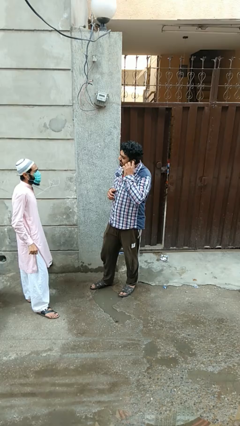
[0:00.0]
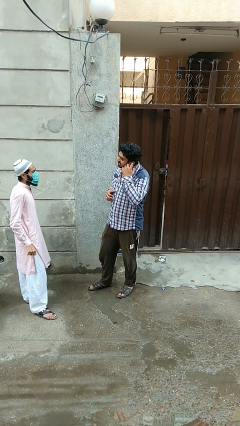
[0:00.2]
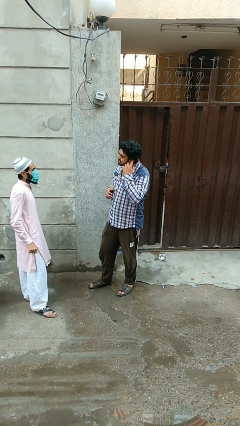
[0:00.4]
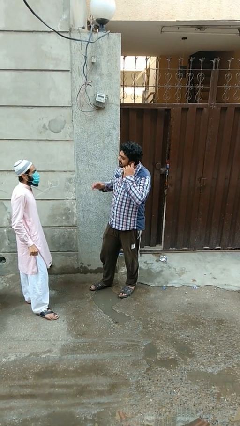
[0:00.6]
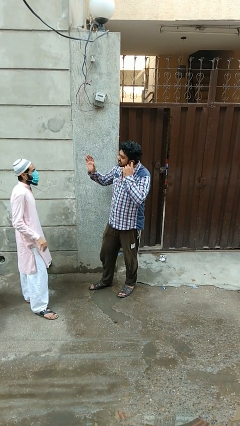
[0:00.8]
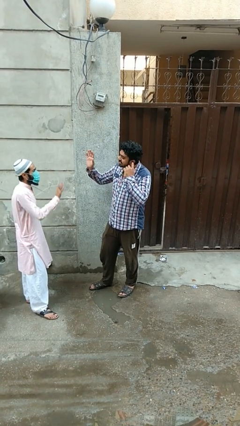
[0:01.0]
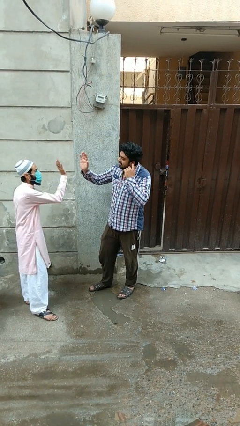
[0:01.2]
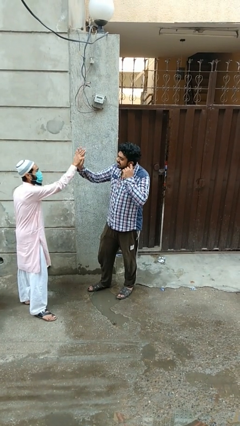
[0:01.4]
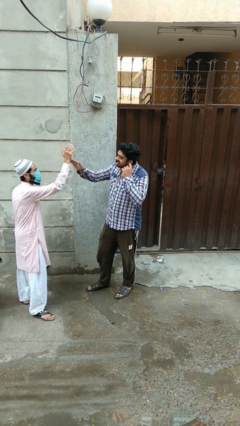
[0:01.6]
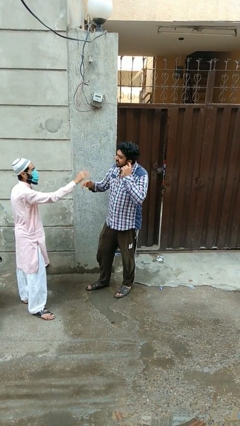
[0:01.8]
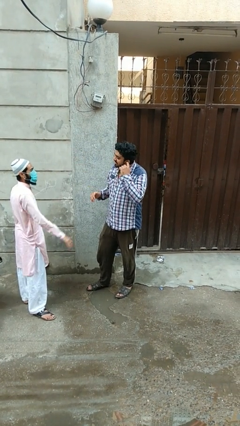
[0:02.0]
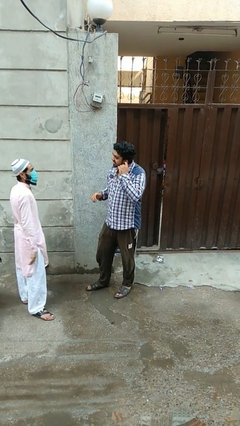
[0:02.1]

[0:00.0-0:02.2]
person highfives hand

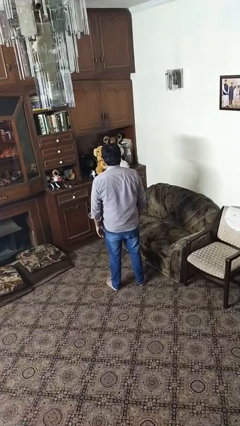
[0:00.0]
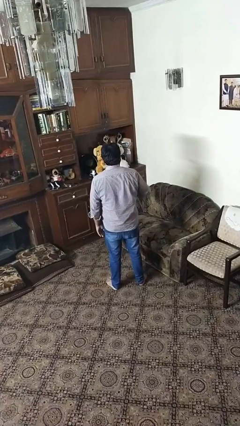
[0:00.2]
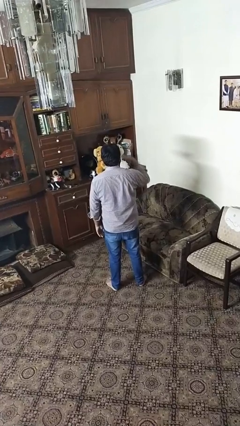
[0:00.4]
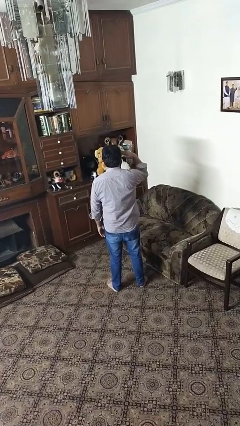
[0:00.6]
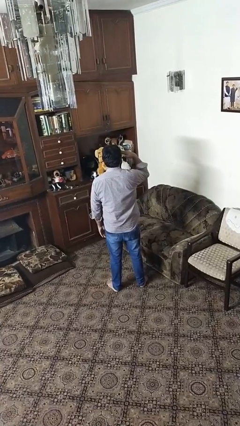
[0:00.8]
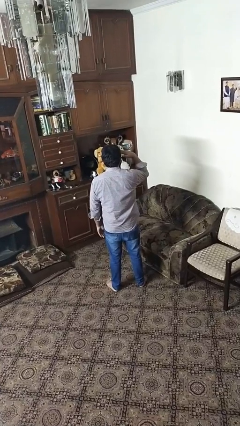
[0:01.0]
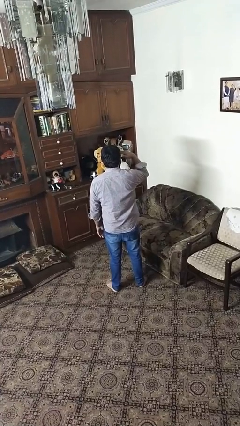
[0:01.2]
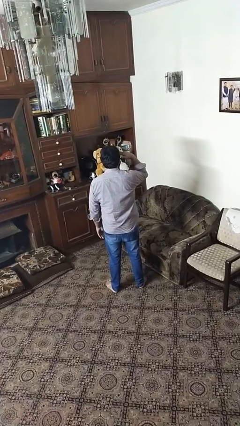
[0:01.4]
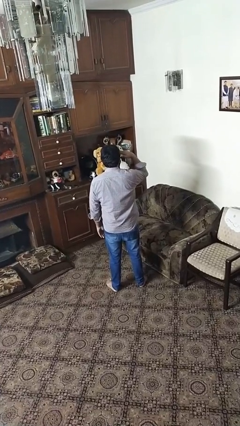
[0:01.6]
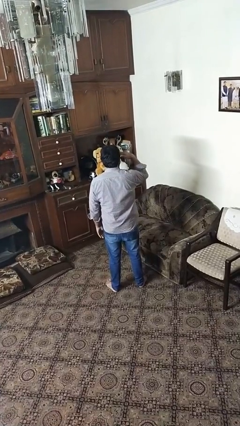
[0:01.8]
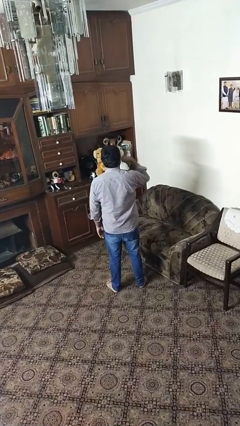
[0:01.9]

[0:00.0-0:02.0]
person salutes

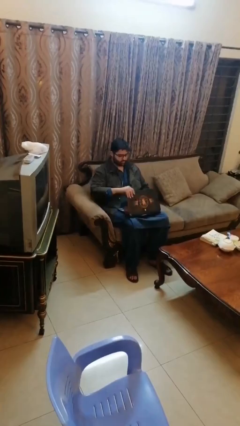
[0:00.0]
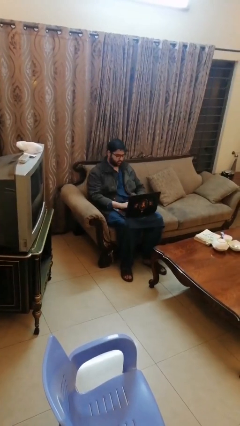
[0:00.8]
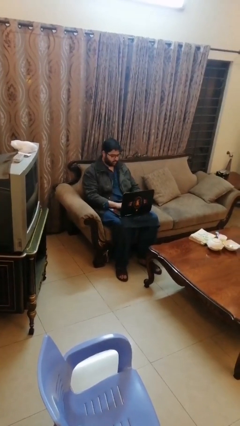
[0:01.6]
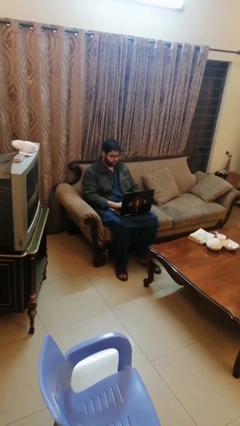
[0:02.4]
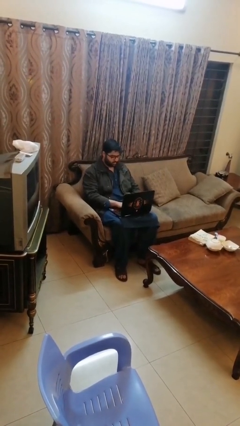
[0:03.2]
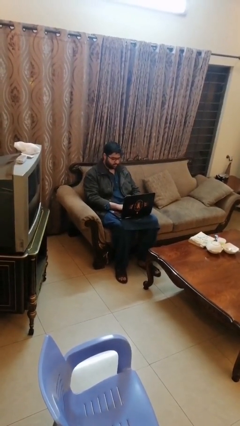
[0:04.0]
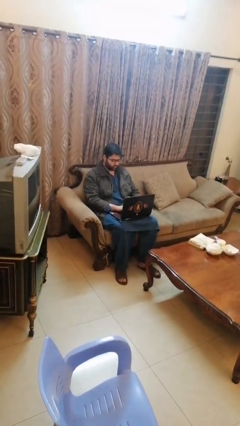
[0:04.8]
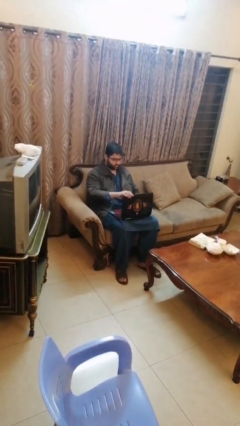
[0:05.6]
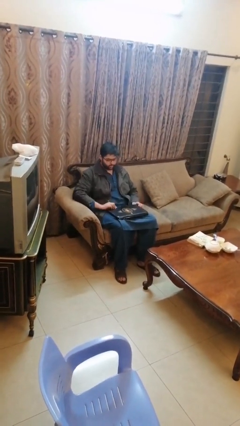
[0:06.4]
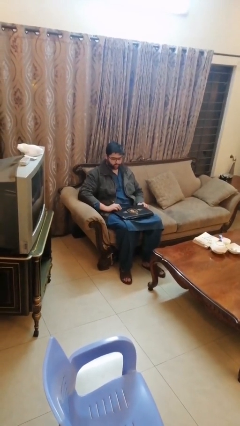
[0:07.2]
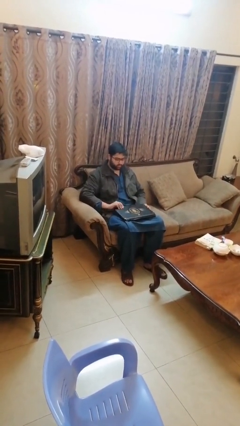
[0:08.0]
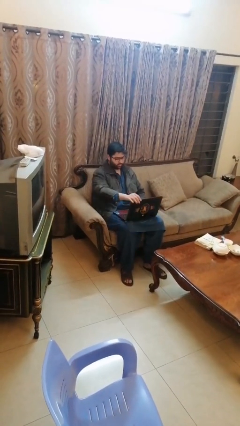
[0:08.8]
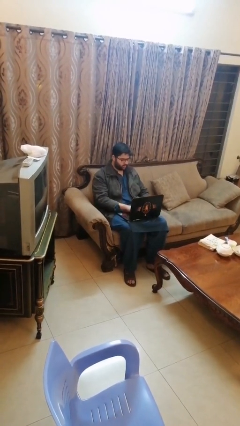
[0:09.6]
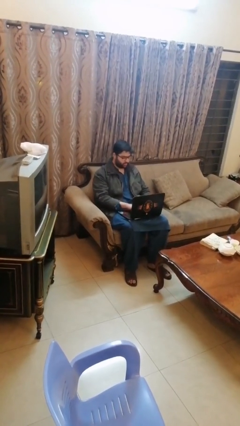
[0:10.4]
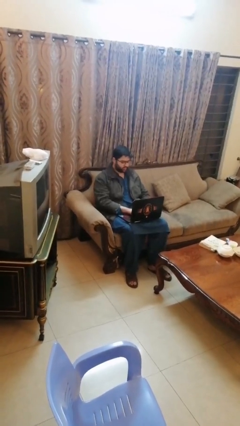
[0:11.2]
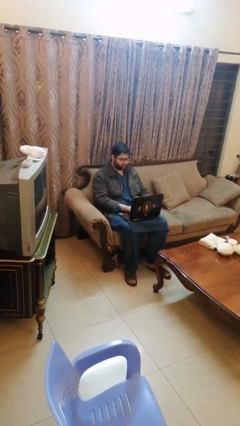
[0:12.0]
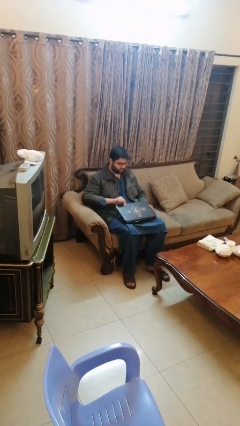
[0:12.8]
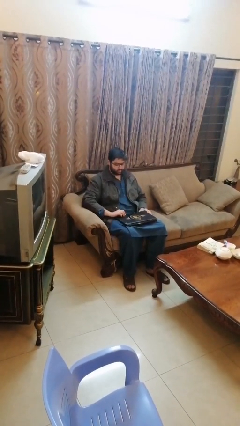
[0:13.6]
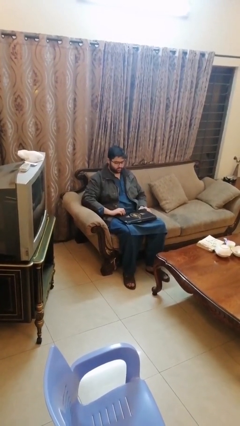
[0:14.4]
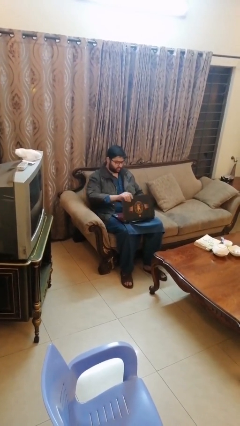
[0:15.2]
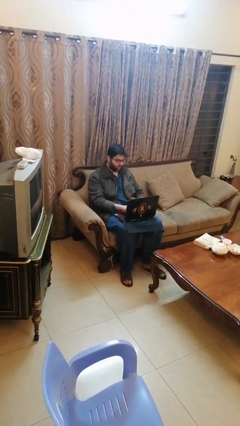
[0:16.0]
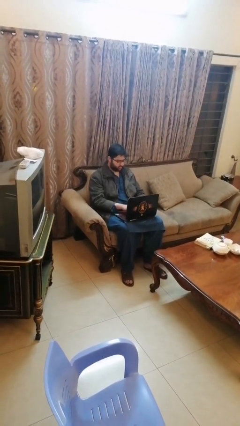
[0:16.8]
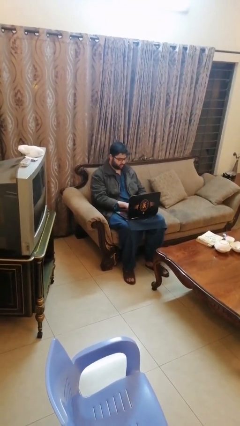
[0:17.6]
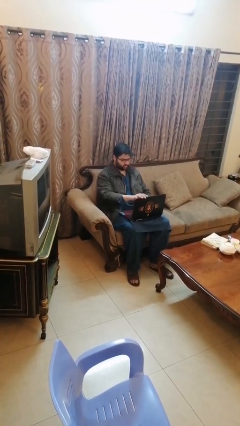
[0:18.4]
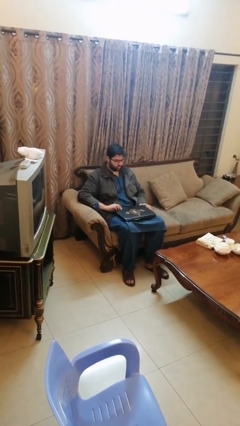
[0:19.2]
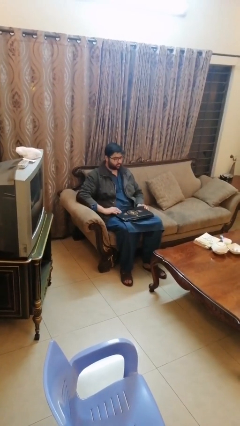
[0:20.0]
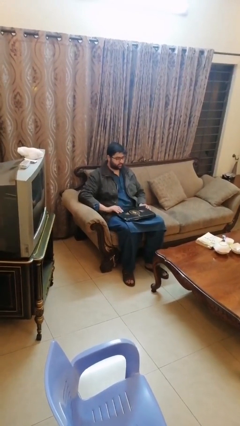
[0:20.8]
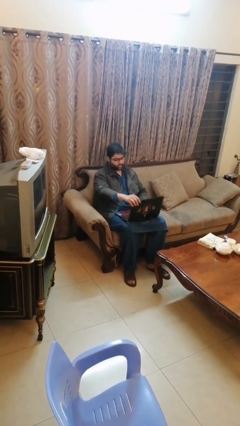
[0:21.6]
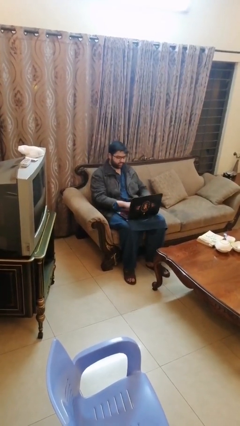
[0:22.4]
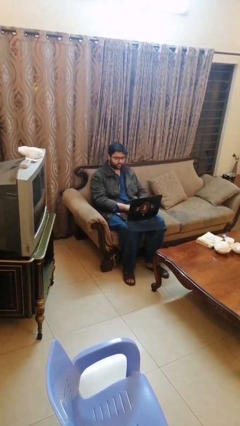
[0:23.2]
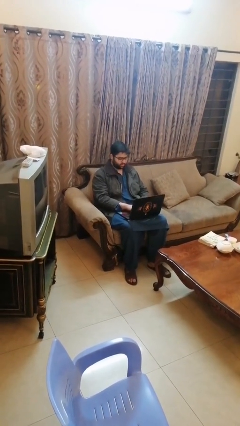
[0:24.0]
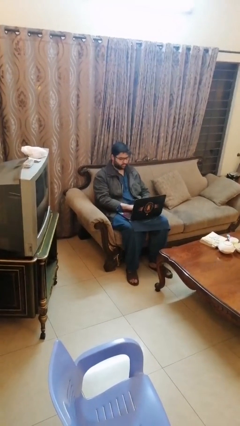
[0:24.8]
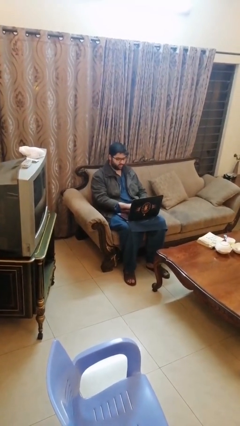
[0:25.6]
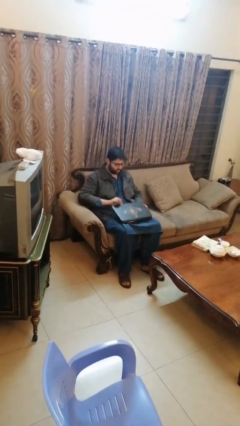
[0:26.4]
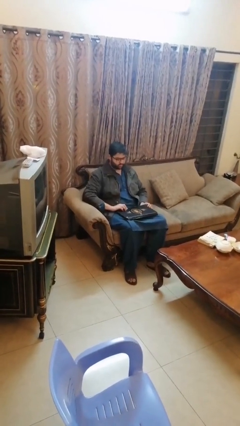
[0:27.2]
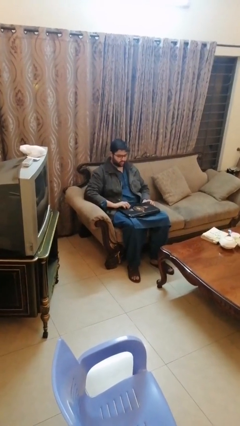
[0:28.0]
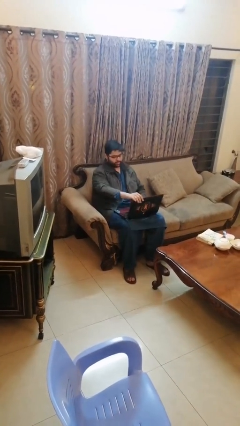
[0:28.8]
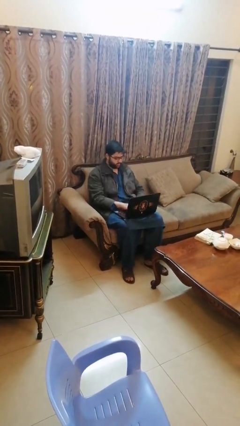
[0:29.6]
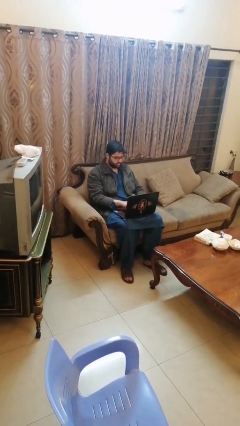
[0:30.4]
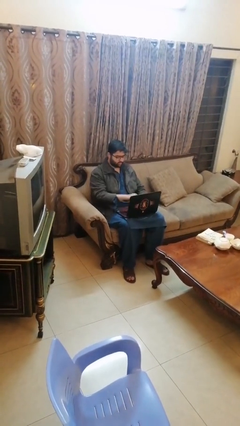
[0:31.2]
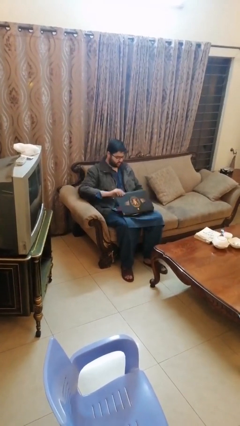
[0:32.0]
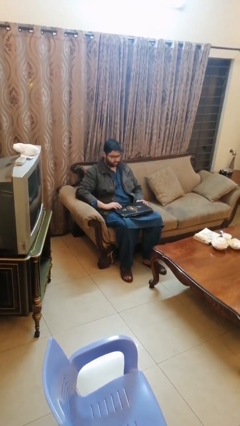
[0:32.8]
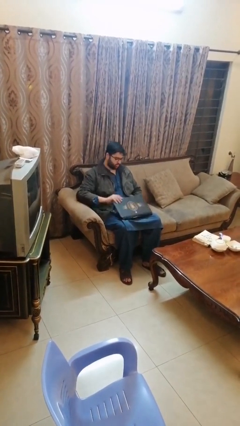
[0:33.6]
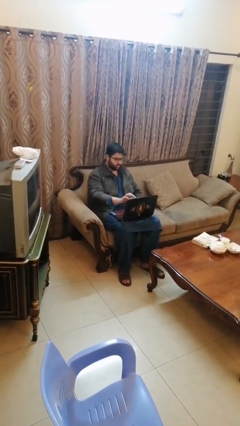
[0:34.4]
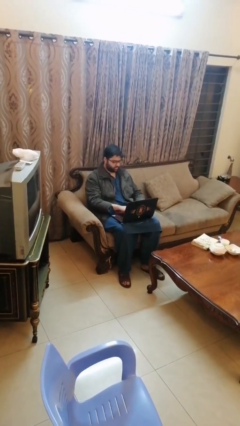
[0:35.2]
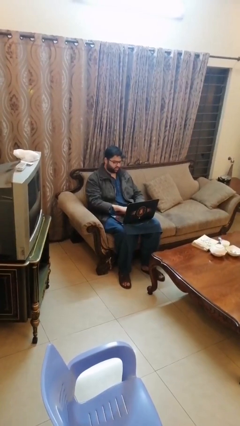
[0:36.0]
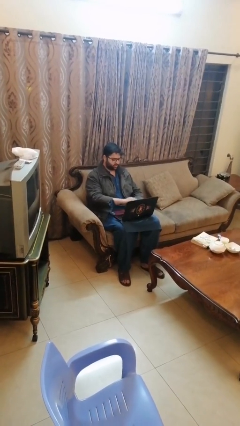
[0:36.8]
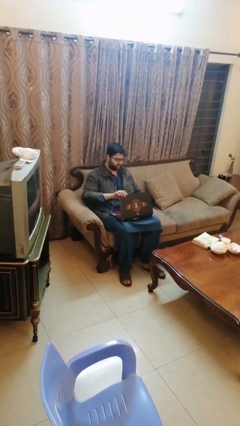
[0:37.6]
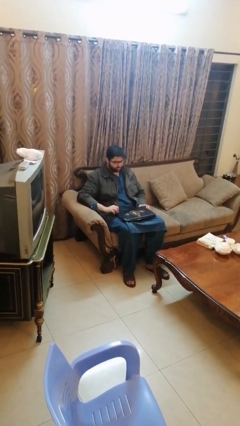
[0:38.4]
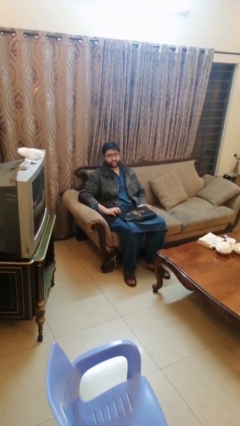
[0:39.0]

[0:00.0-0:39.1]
person interacts with laptop

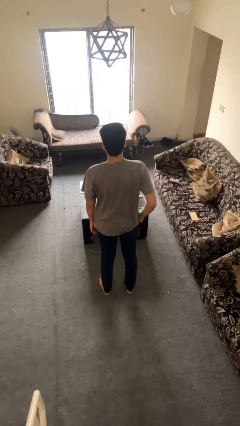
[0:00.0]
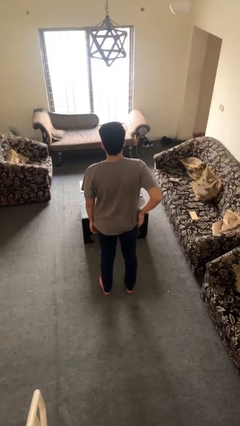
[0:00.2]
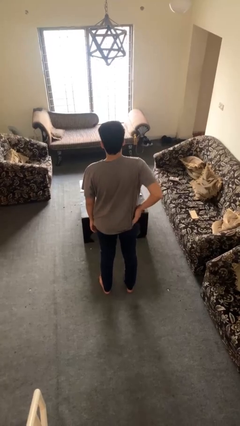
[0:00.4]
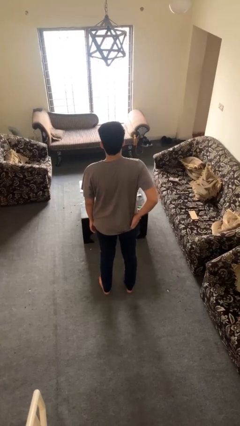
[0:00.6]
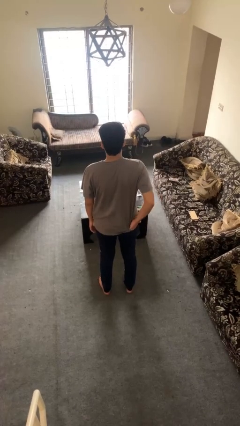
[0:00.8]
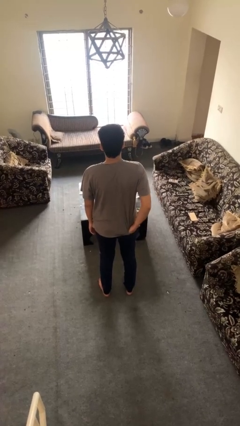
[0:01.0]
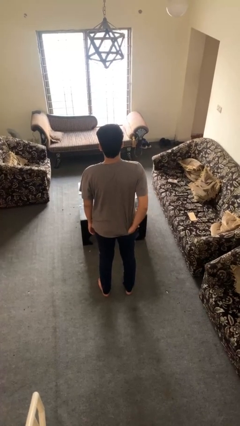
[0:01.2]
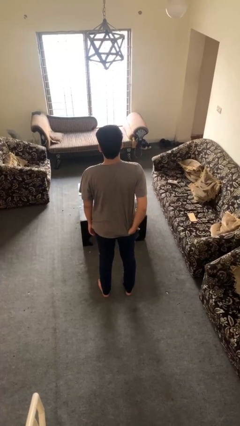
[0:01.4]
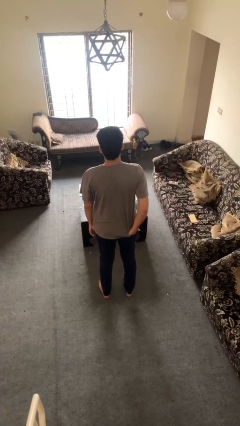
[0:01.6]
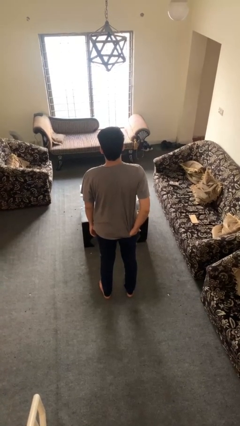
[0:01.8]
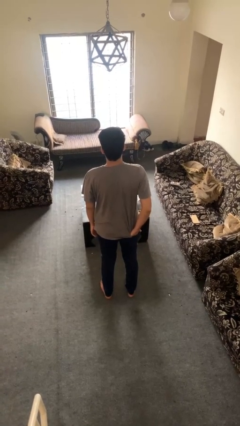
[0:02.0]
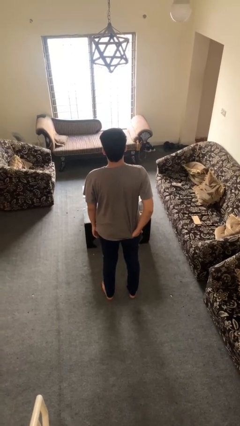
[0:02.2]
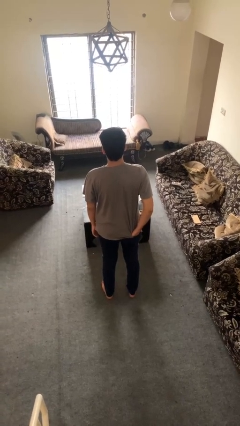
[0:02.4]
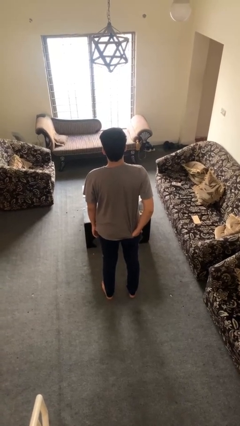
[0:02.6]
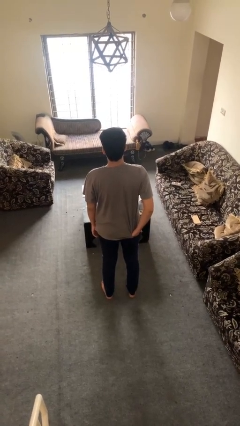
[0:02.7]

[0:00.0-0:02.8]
person puts hands in back pockets

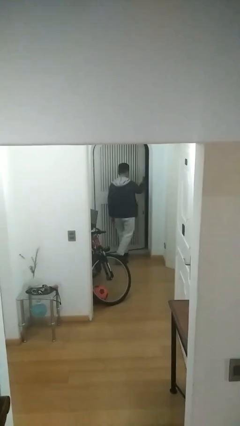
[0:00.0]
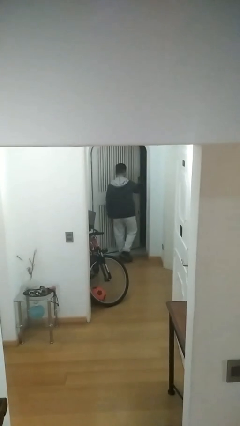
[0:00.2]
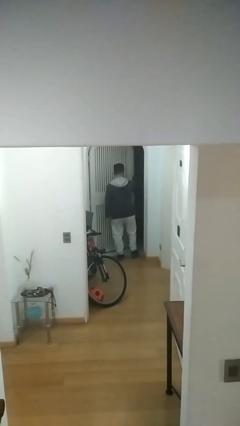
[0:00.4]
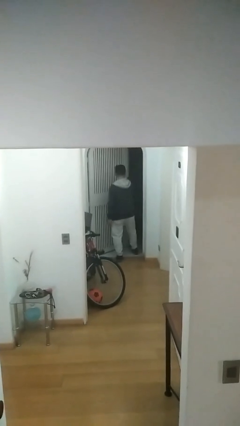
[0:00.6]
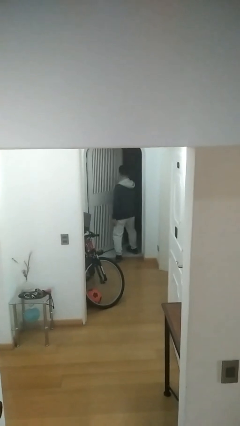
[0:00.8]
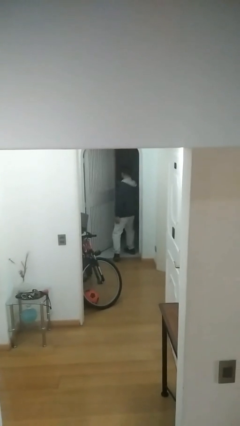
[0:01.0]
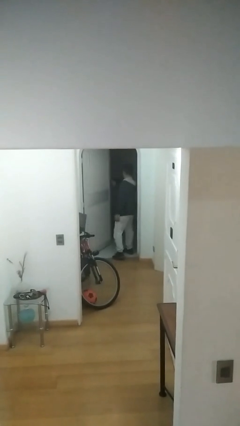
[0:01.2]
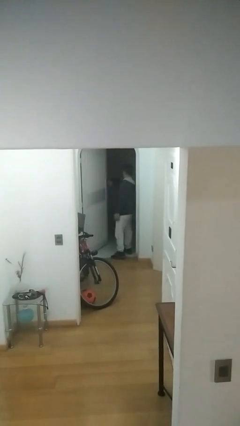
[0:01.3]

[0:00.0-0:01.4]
person opens facility door
